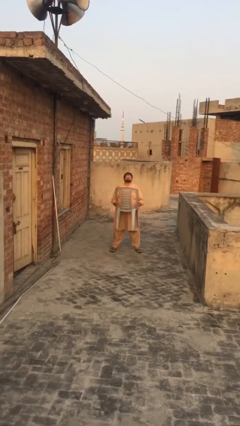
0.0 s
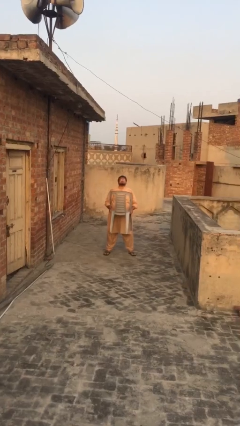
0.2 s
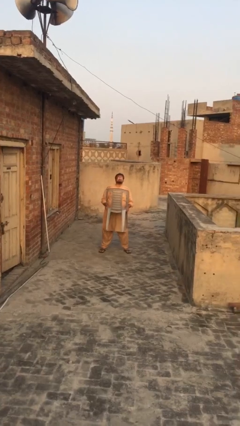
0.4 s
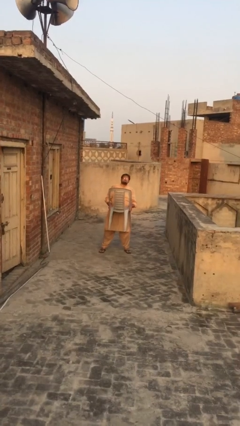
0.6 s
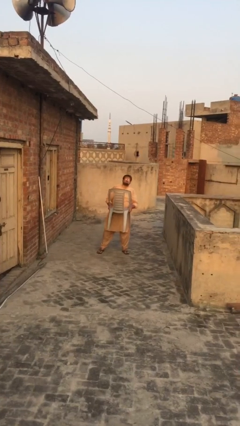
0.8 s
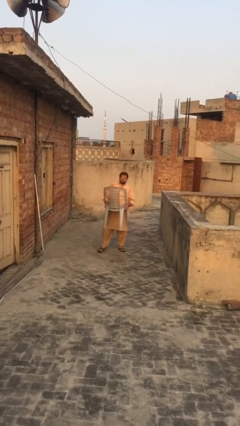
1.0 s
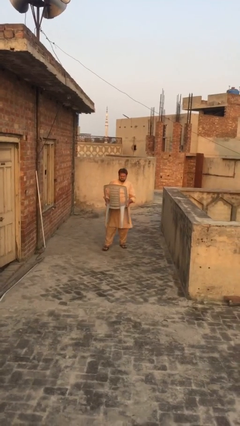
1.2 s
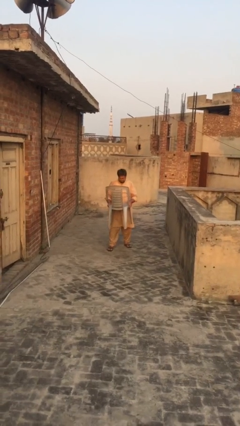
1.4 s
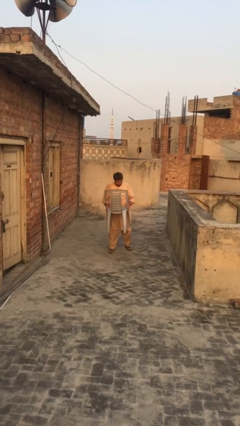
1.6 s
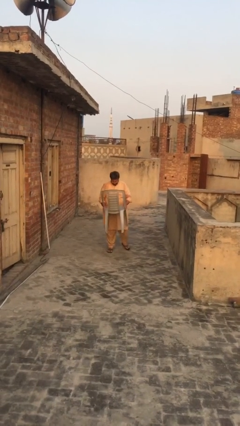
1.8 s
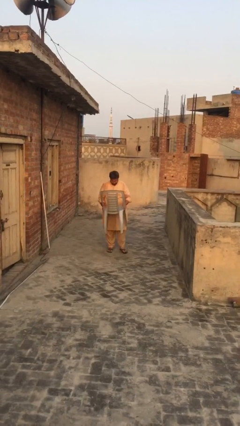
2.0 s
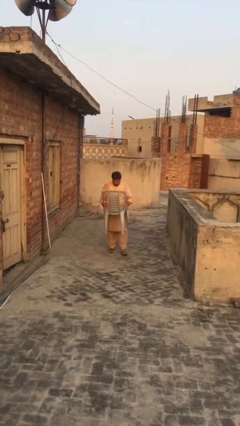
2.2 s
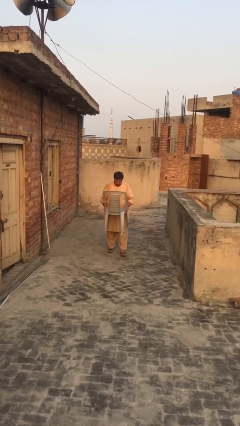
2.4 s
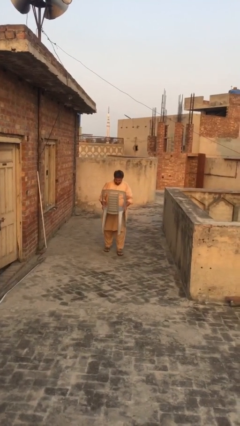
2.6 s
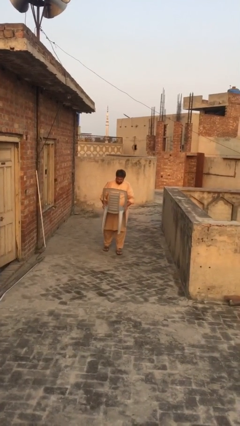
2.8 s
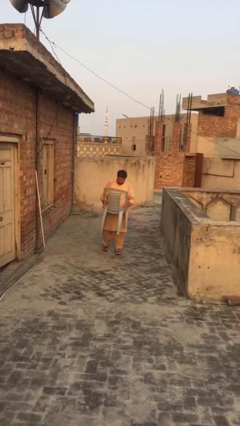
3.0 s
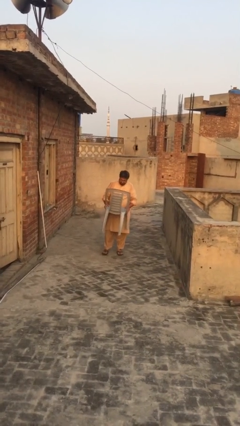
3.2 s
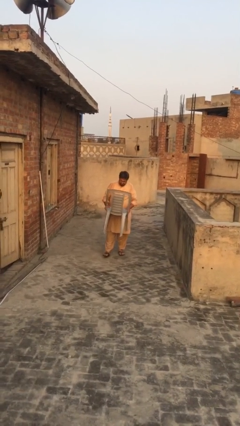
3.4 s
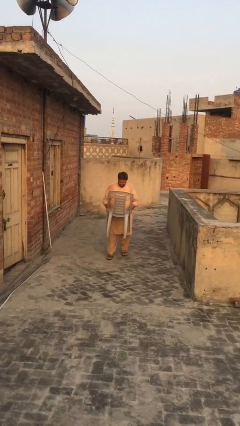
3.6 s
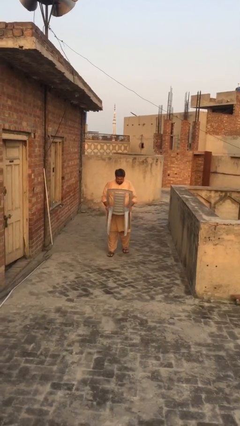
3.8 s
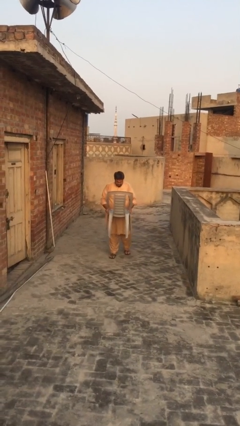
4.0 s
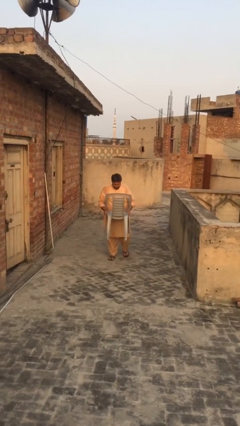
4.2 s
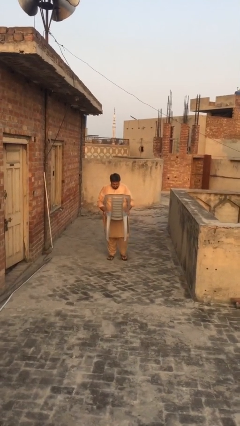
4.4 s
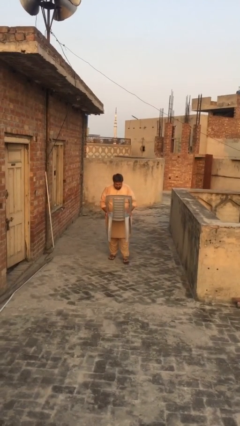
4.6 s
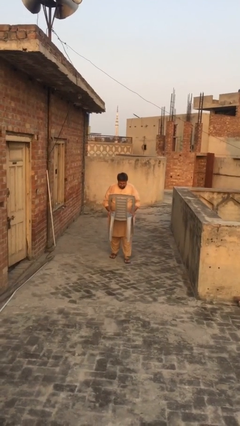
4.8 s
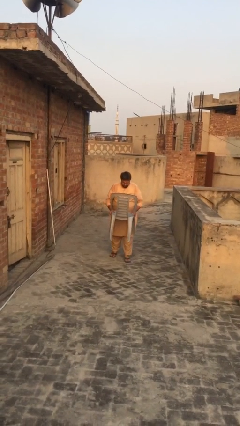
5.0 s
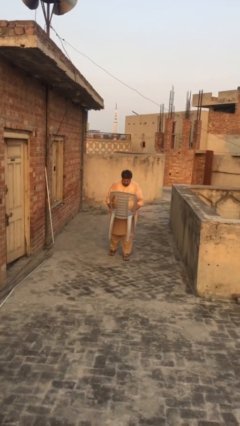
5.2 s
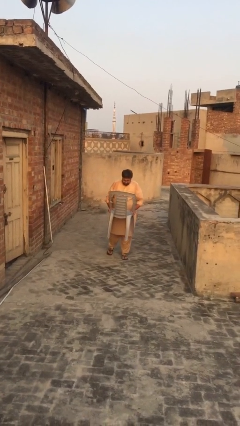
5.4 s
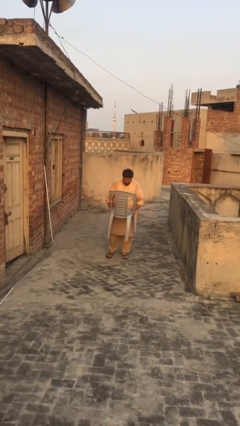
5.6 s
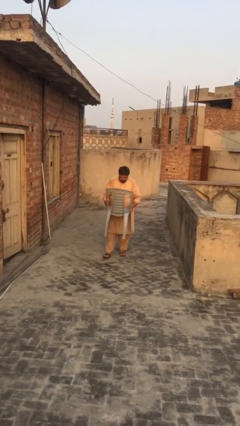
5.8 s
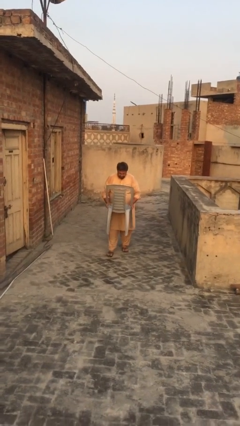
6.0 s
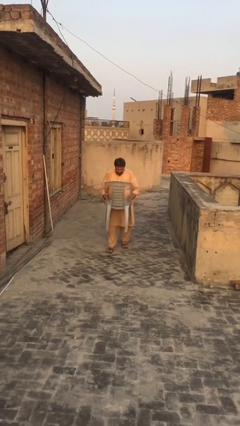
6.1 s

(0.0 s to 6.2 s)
person carries heavy object

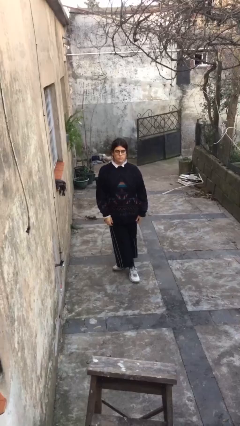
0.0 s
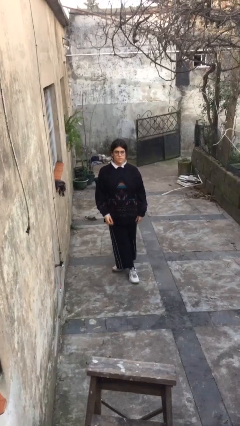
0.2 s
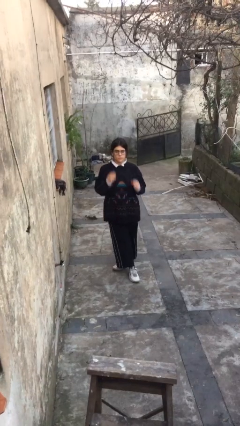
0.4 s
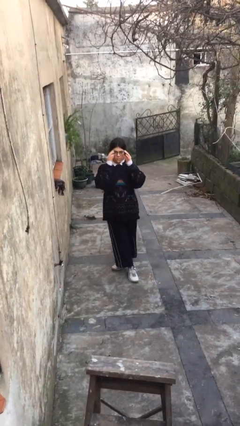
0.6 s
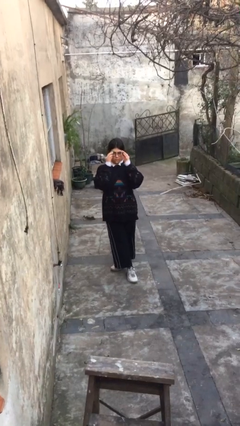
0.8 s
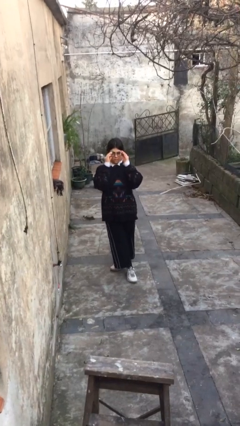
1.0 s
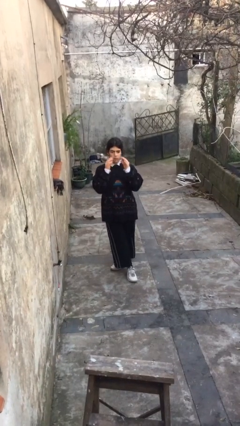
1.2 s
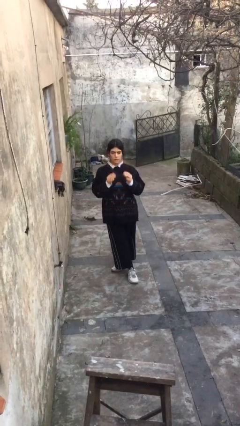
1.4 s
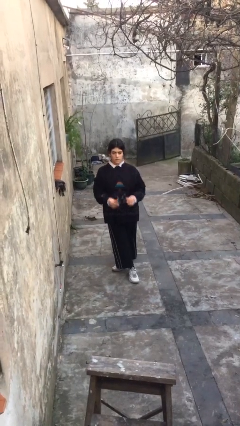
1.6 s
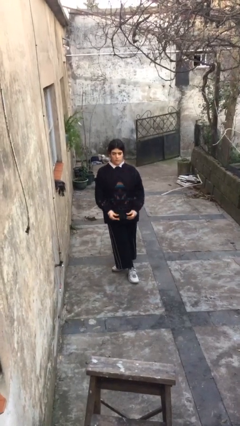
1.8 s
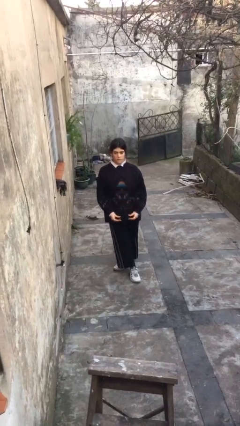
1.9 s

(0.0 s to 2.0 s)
person takes off glasses

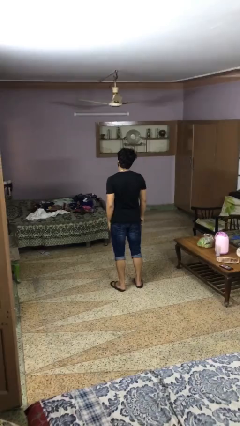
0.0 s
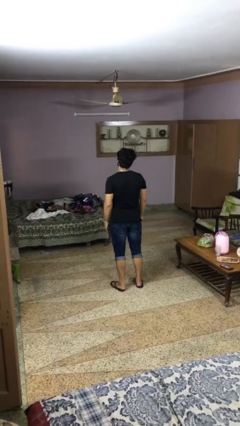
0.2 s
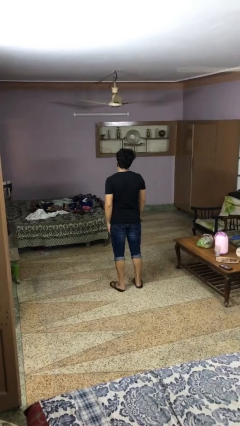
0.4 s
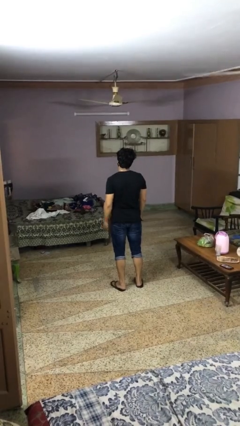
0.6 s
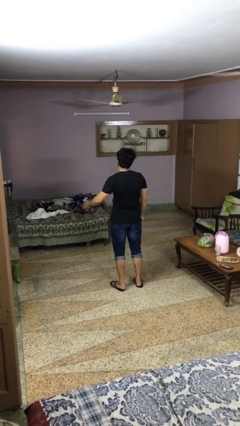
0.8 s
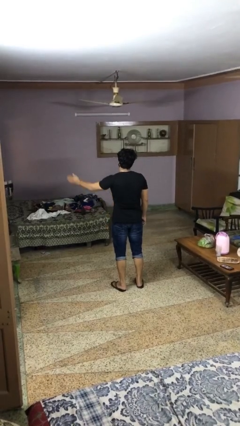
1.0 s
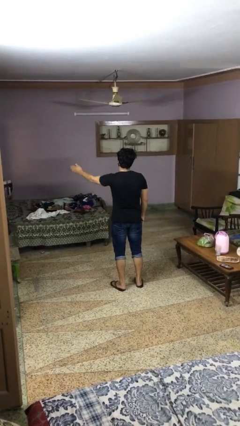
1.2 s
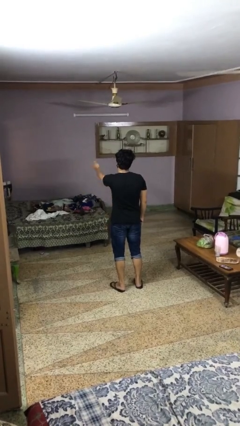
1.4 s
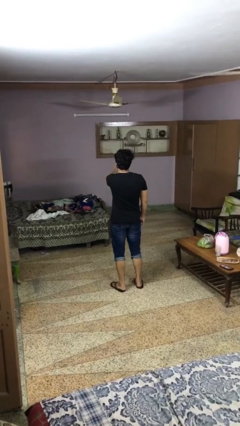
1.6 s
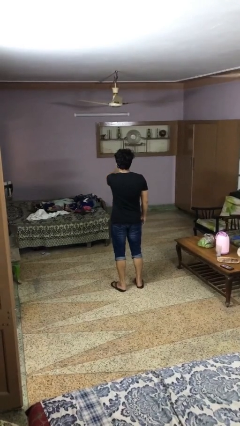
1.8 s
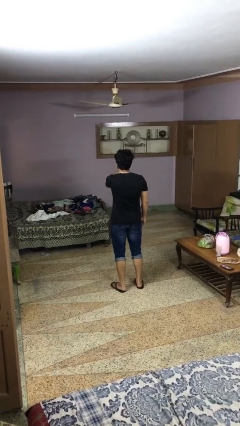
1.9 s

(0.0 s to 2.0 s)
person gestures swipe right

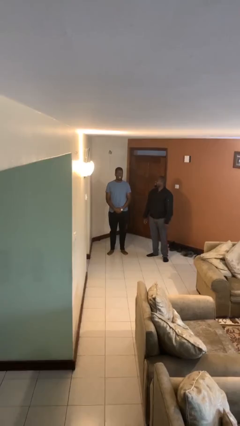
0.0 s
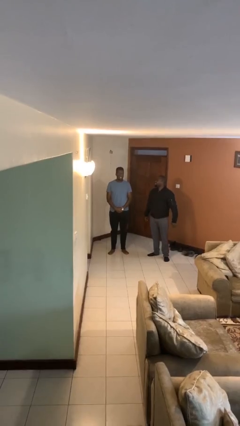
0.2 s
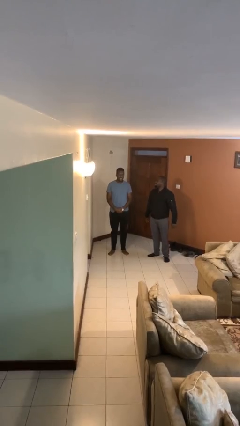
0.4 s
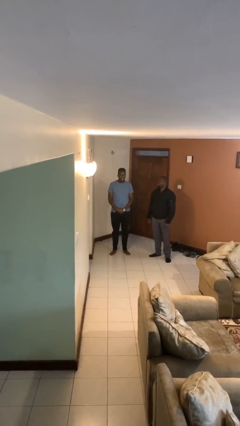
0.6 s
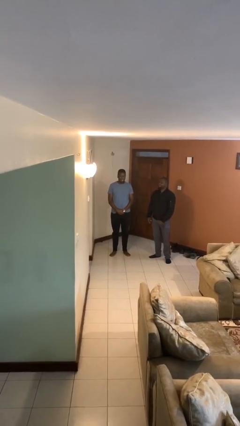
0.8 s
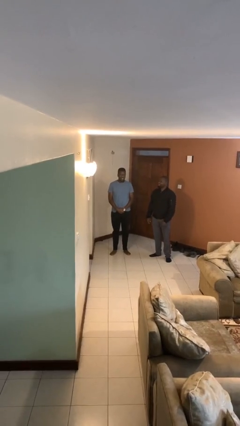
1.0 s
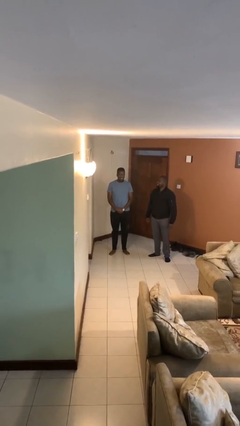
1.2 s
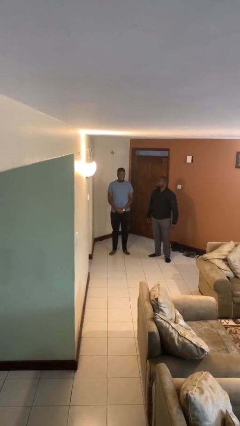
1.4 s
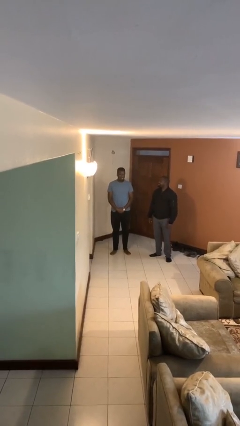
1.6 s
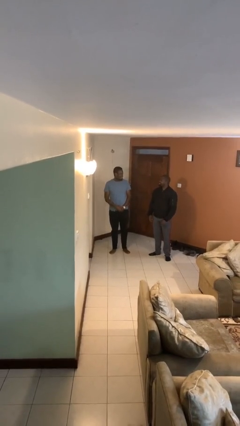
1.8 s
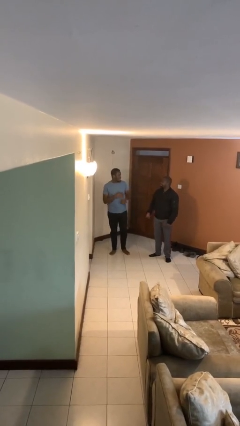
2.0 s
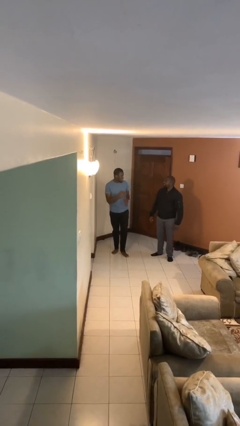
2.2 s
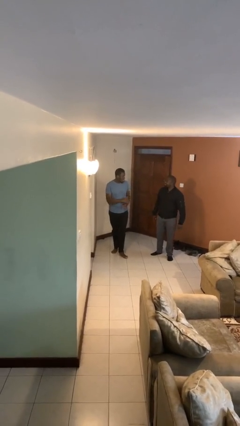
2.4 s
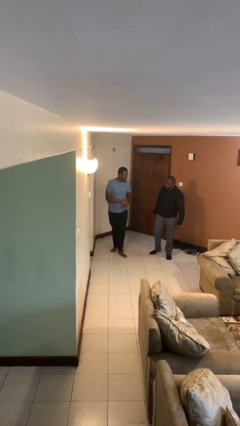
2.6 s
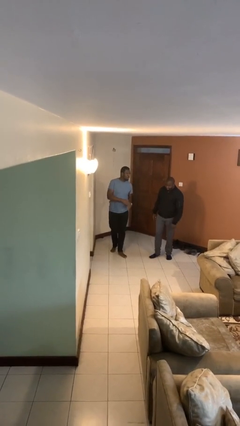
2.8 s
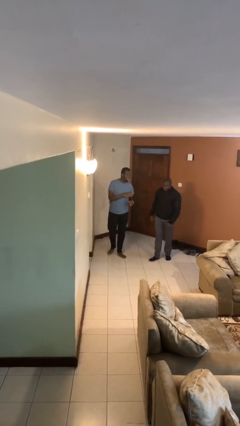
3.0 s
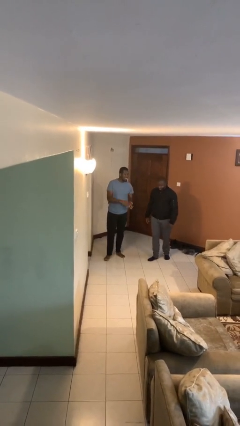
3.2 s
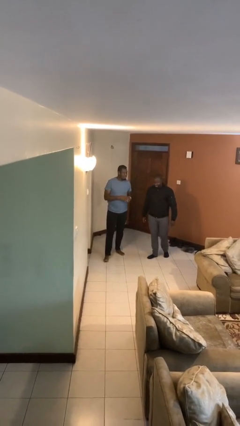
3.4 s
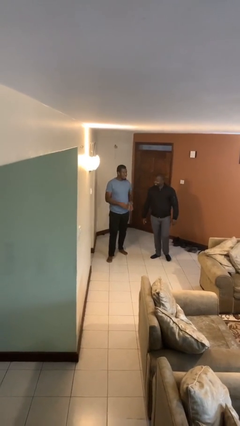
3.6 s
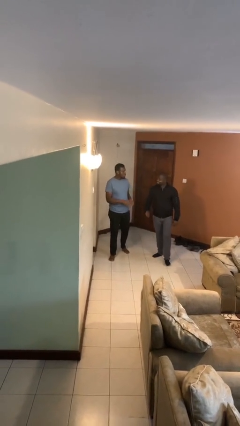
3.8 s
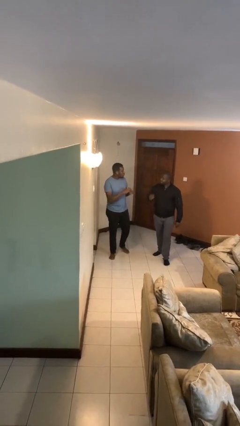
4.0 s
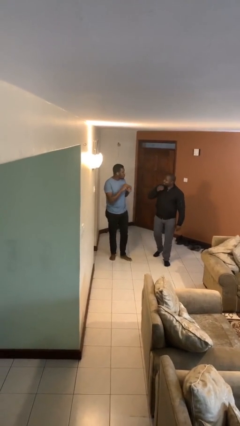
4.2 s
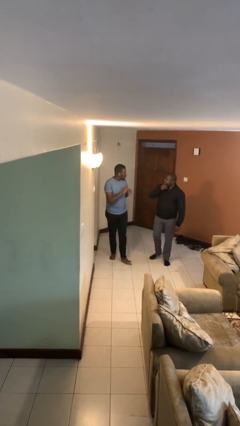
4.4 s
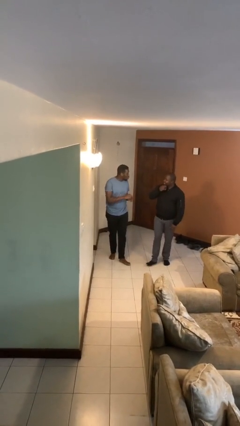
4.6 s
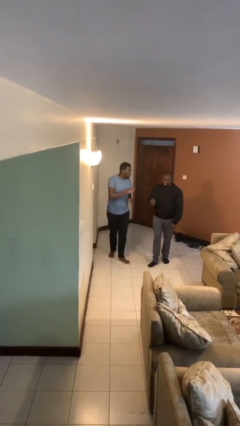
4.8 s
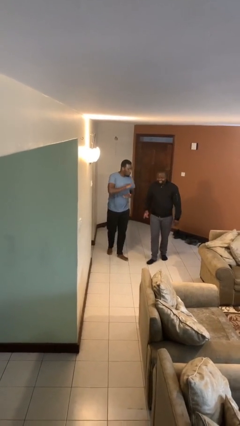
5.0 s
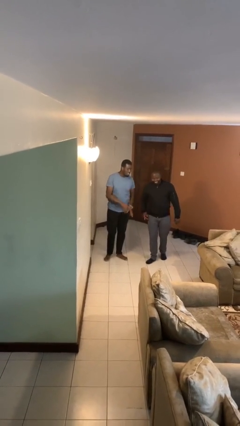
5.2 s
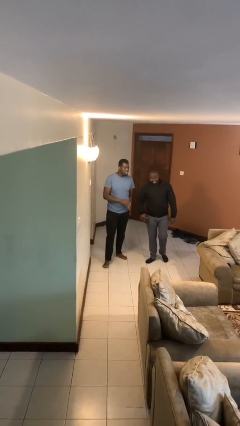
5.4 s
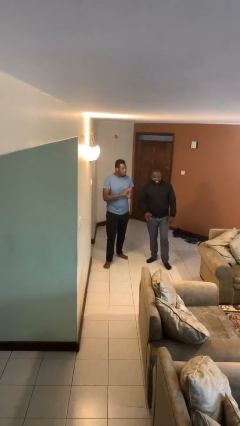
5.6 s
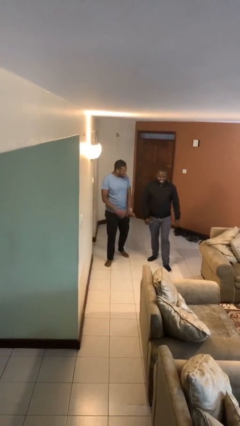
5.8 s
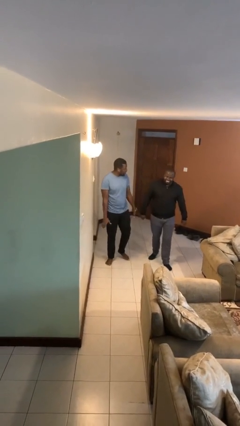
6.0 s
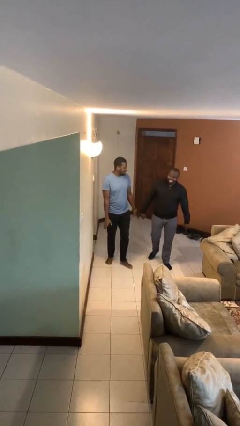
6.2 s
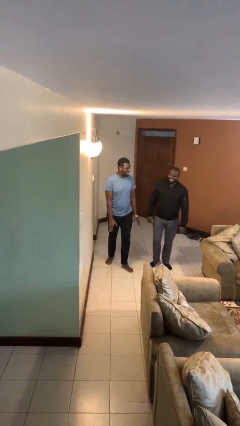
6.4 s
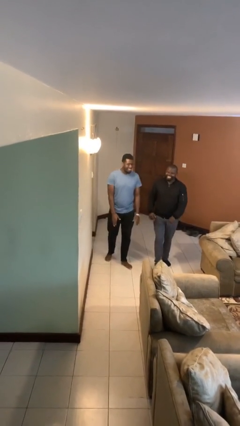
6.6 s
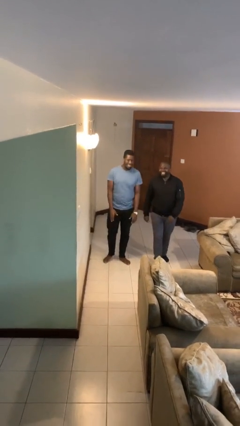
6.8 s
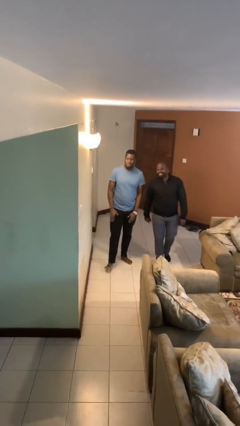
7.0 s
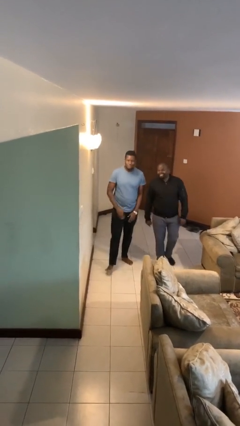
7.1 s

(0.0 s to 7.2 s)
person talks to person

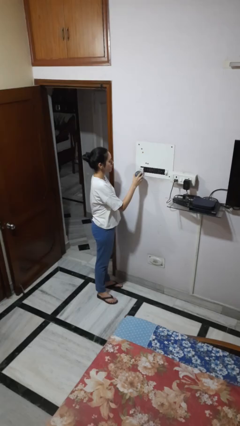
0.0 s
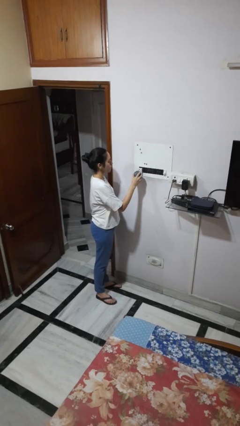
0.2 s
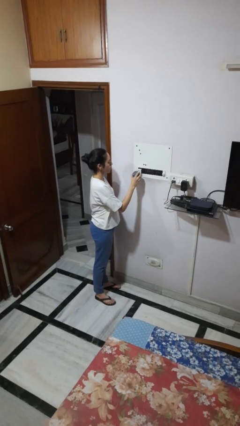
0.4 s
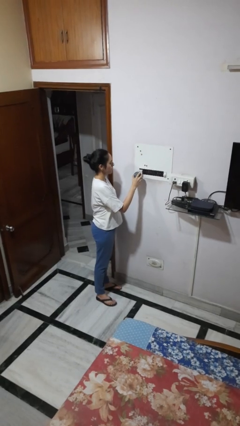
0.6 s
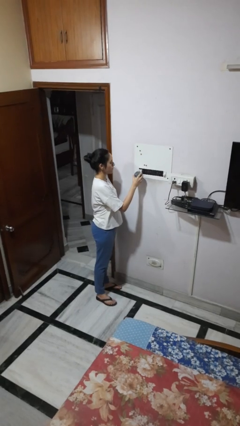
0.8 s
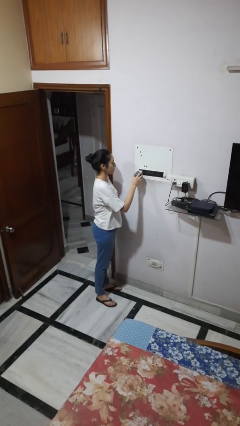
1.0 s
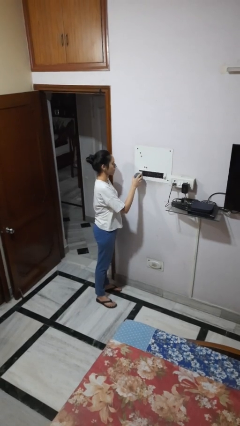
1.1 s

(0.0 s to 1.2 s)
person plugs into electrical socket
